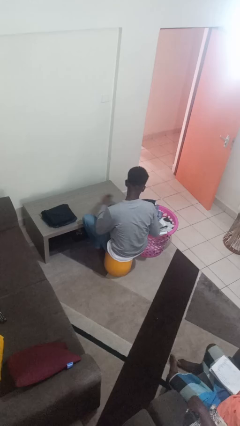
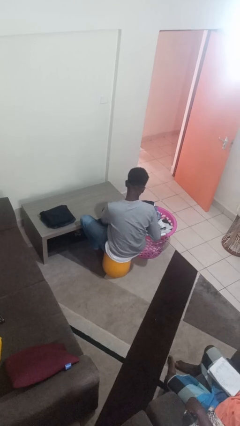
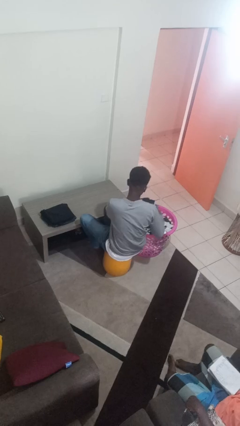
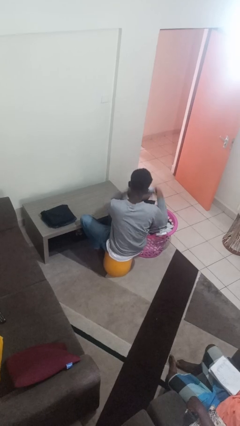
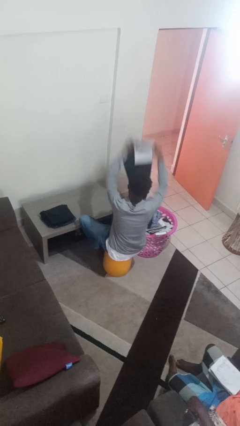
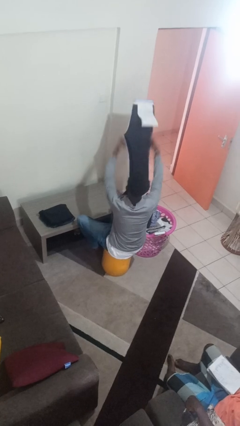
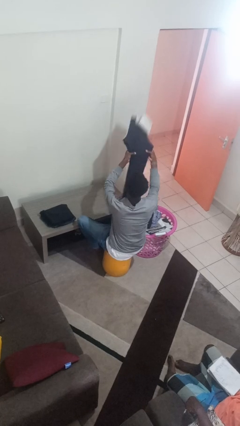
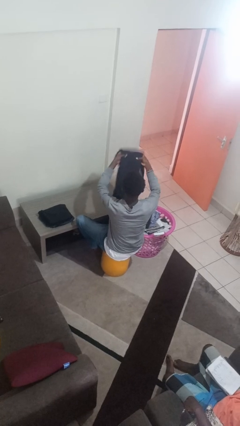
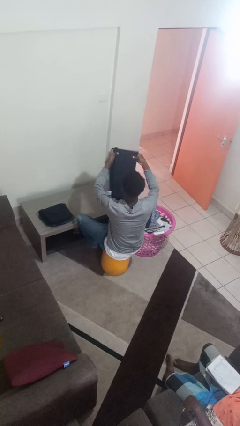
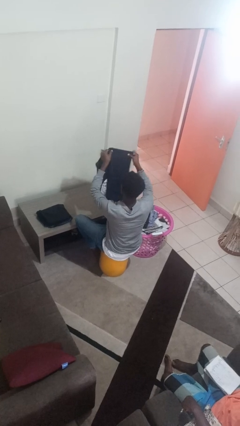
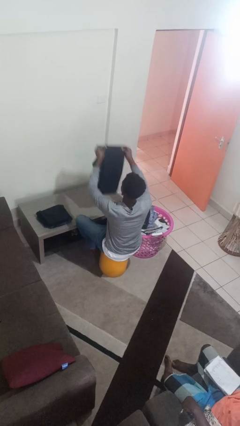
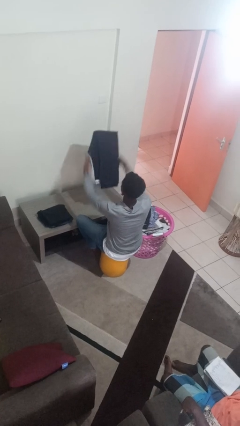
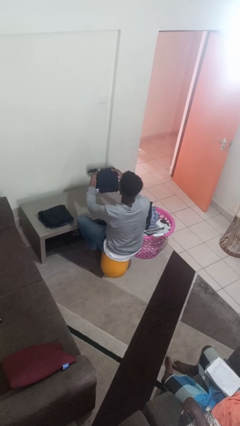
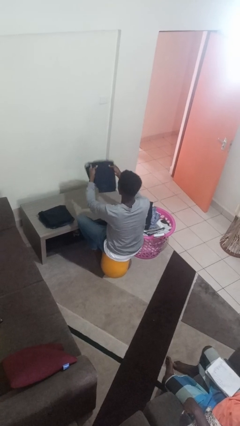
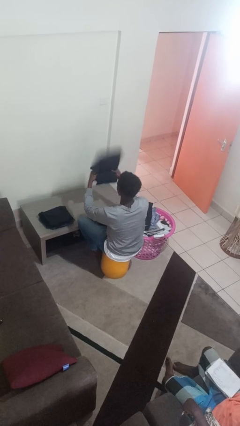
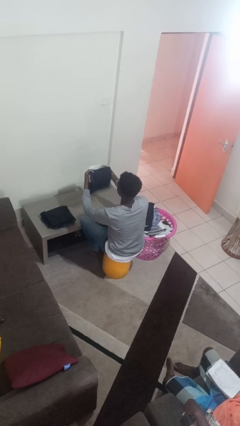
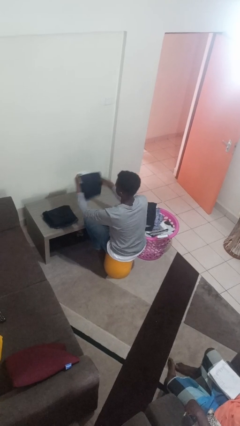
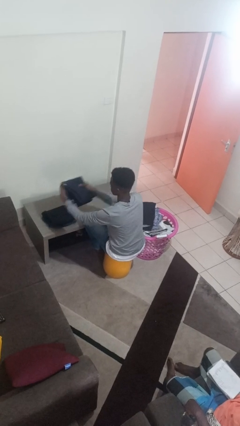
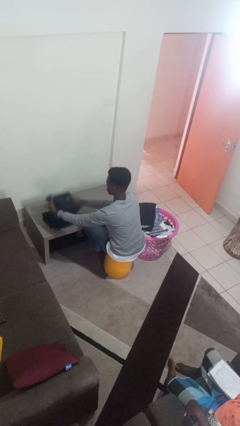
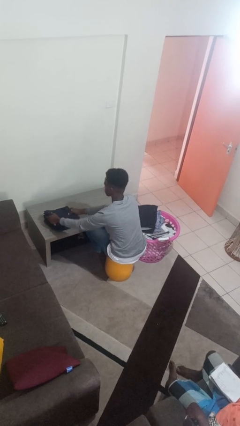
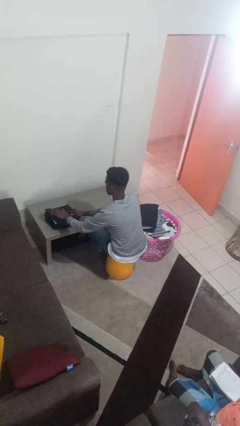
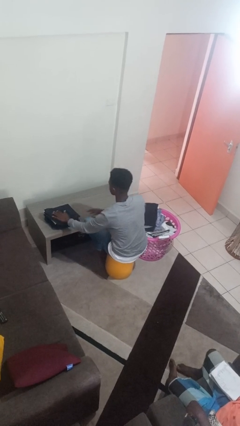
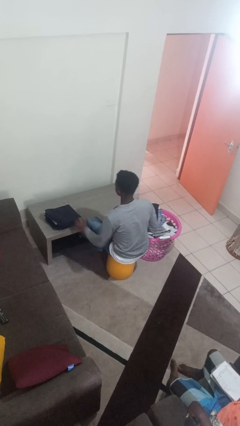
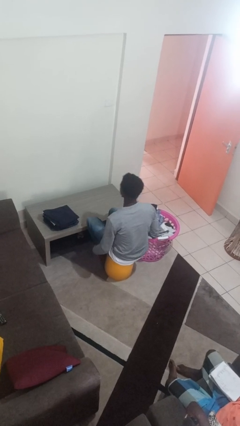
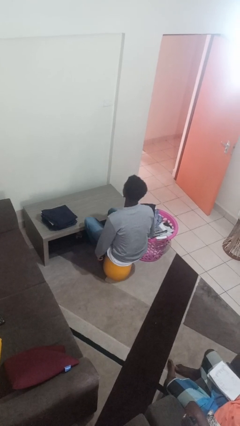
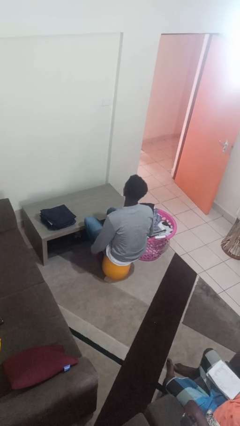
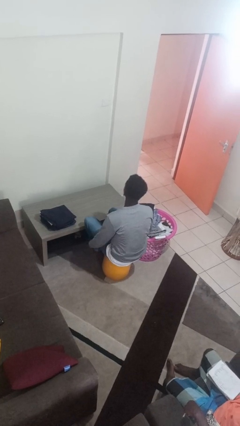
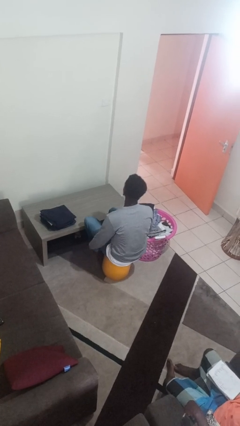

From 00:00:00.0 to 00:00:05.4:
person folds pants

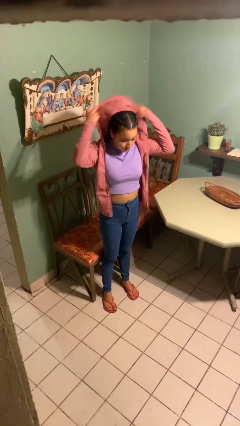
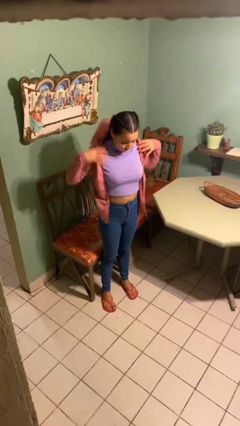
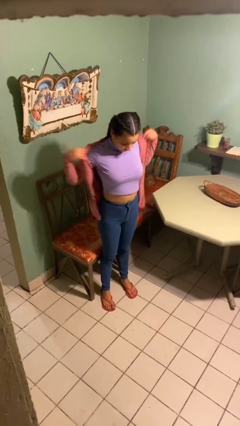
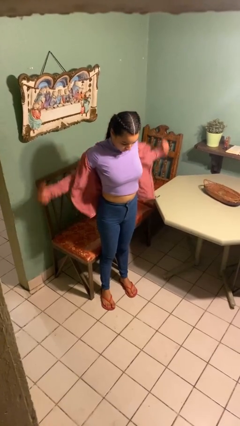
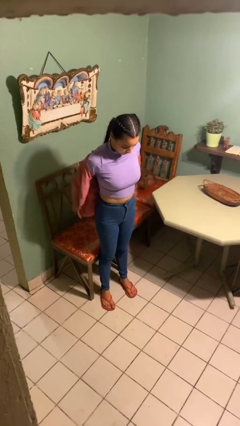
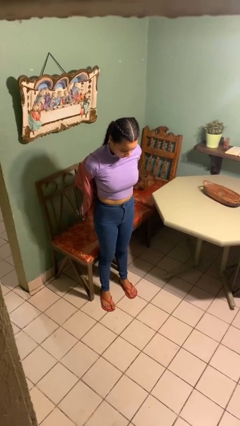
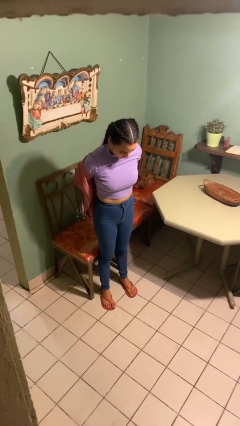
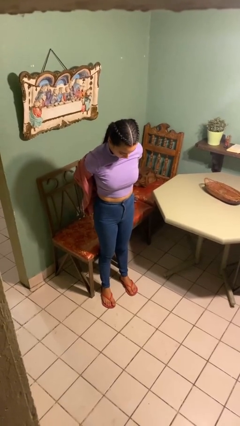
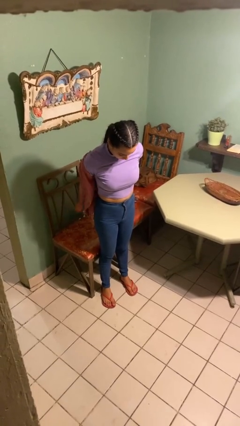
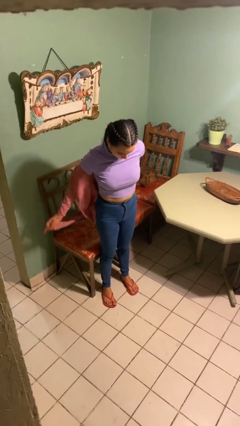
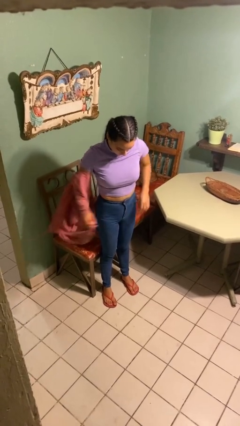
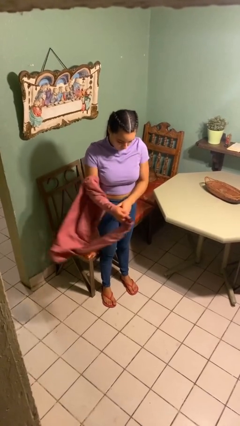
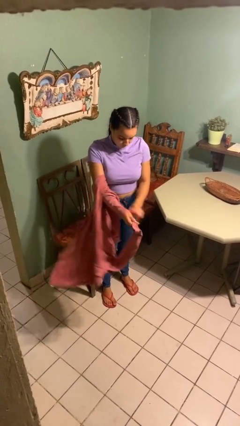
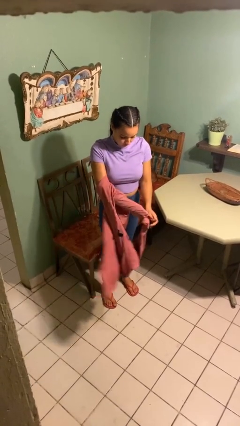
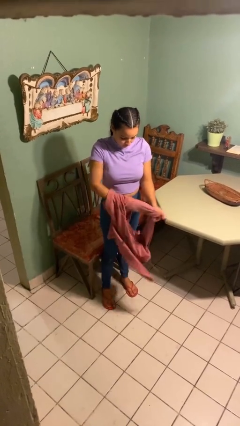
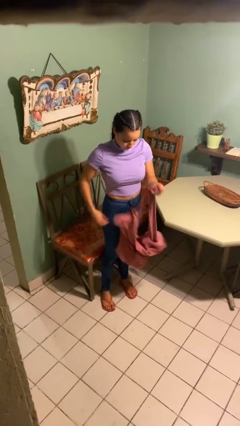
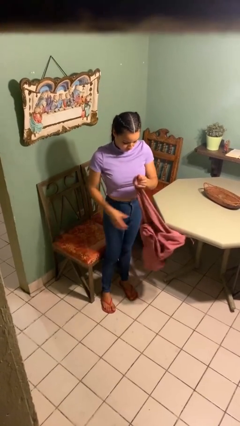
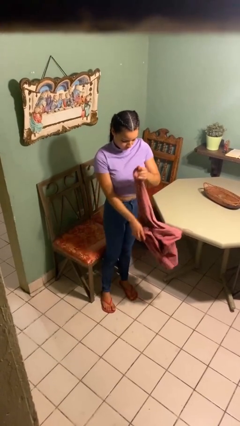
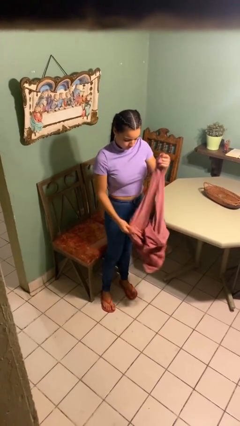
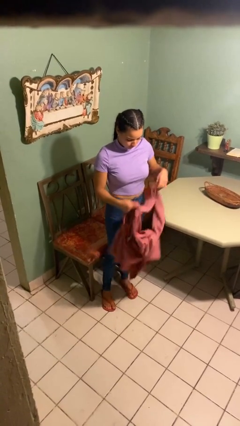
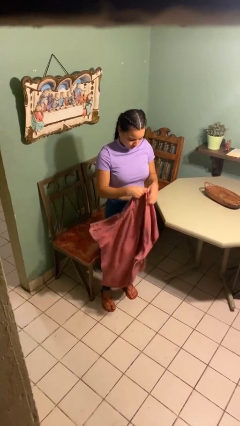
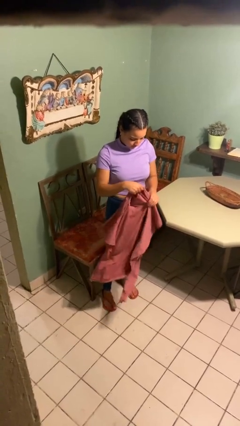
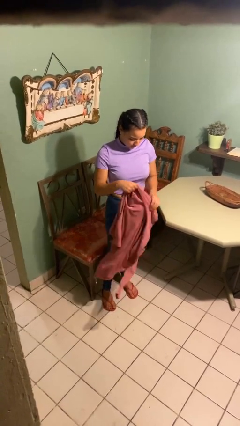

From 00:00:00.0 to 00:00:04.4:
person takes off hoodie

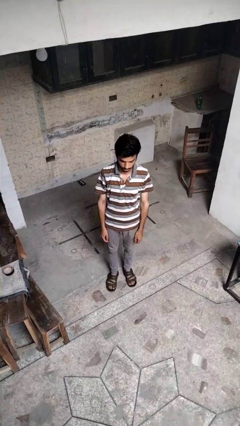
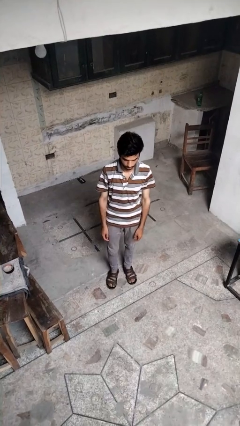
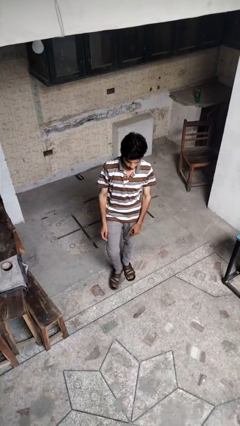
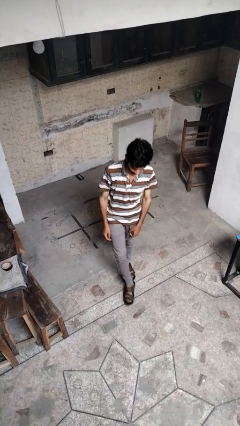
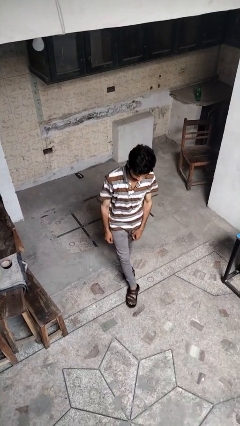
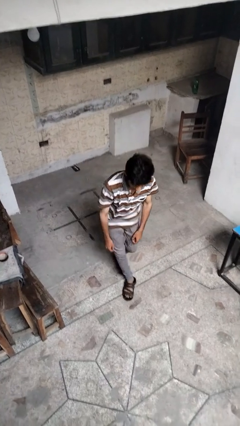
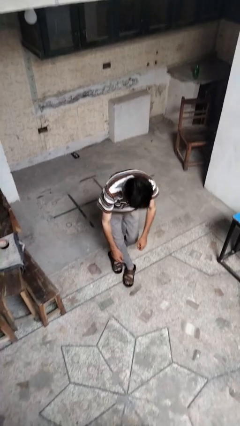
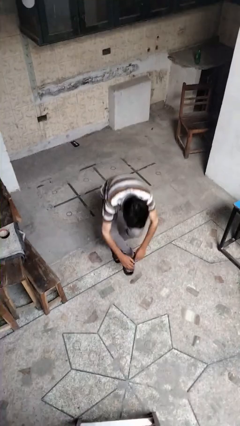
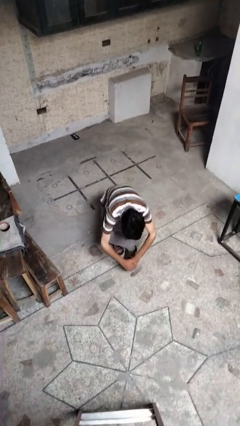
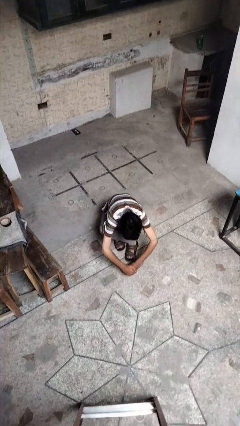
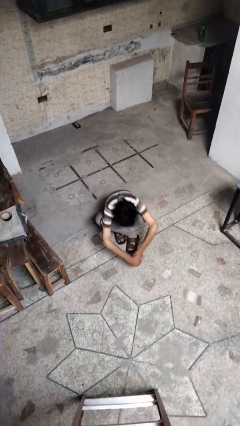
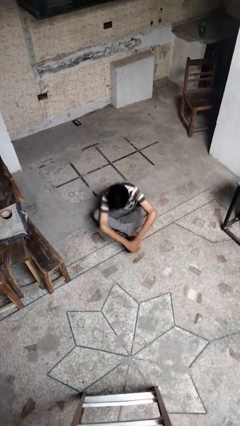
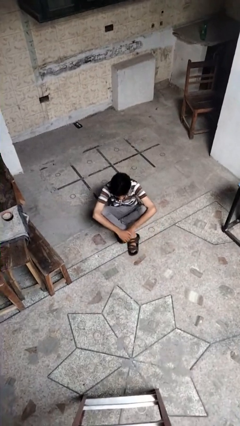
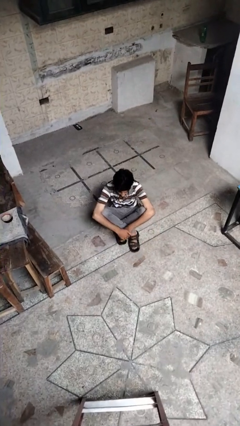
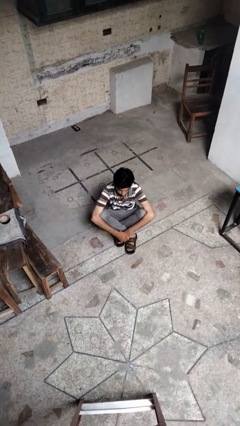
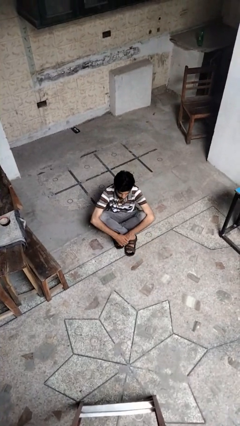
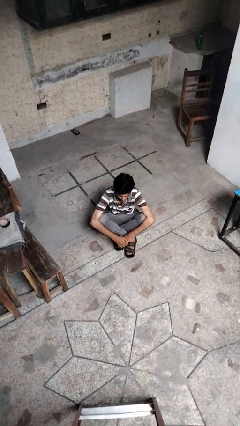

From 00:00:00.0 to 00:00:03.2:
person sits crisscross

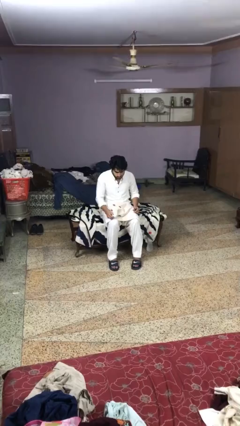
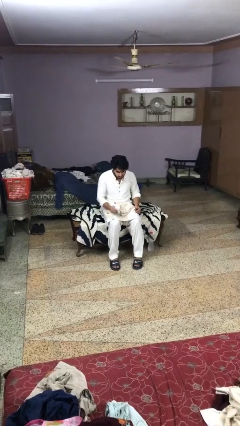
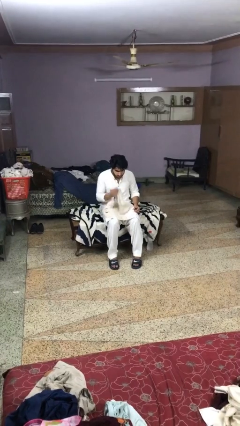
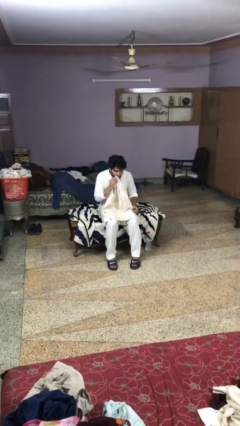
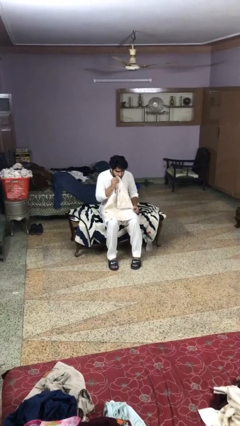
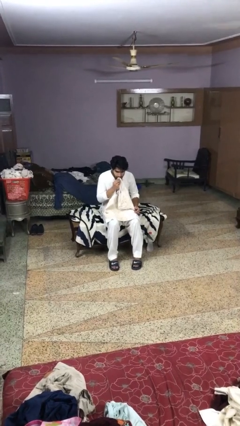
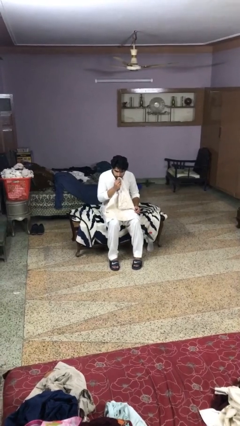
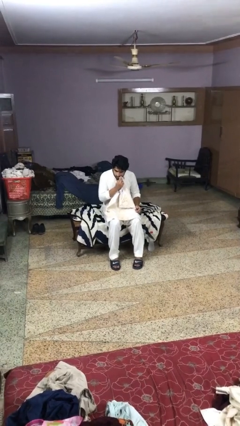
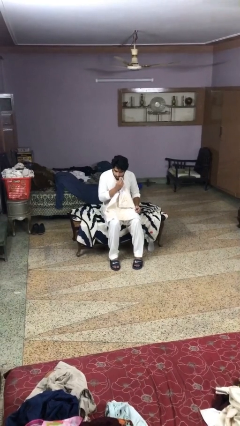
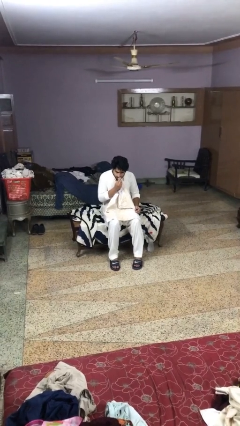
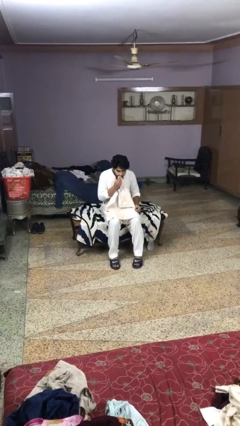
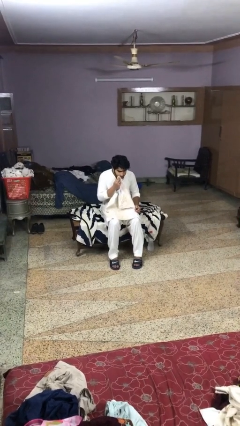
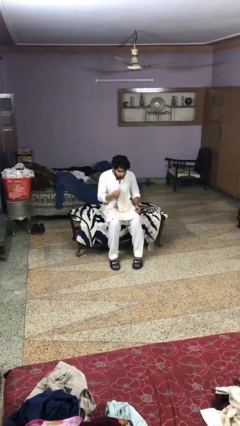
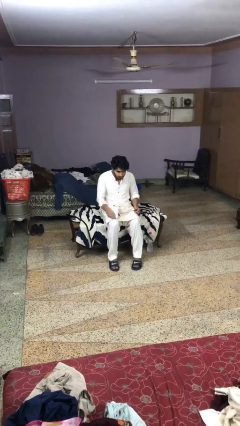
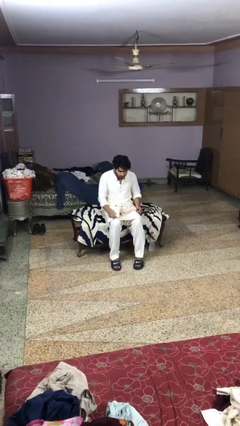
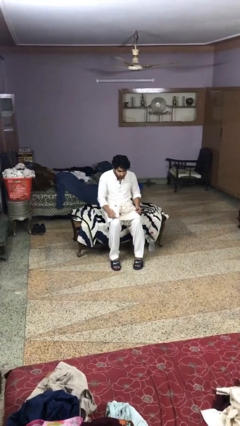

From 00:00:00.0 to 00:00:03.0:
person wipes mouth with napkin

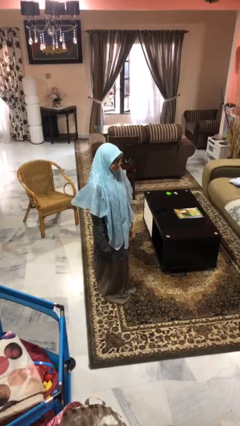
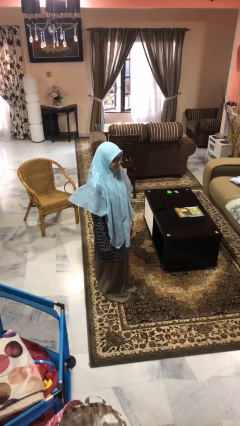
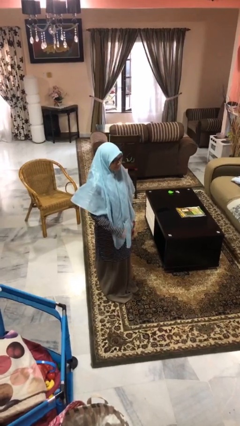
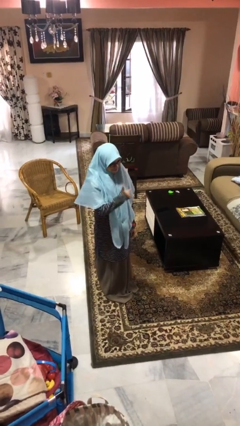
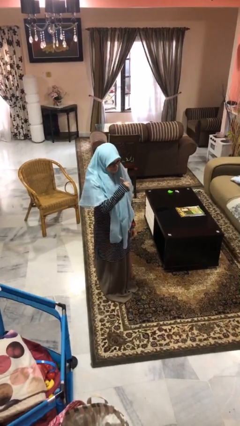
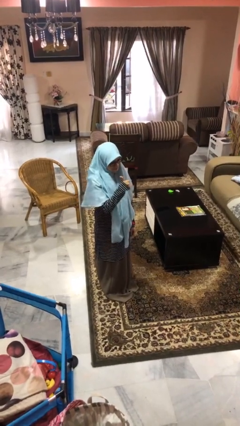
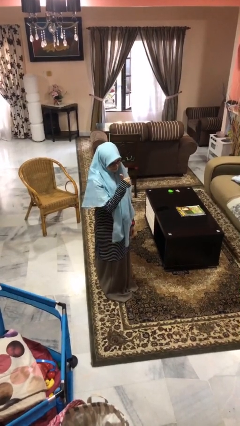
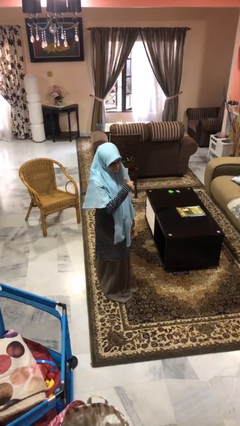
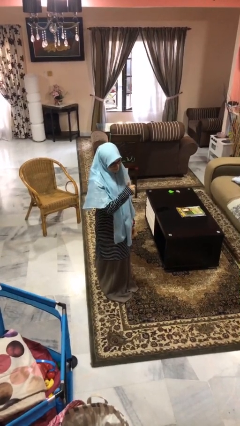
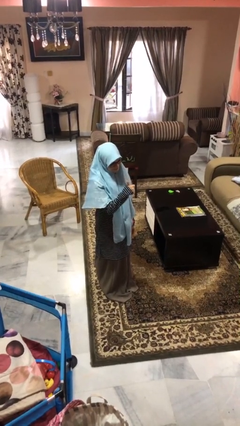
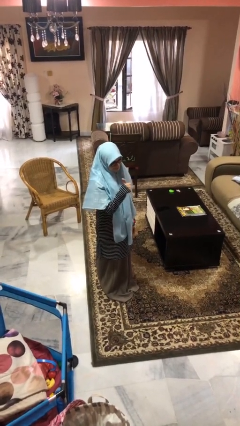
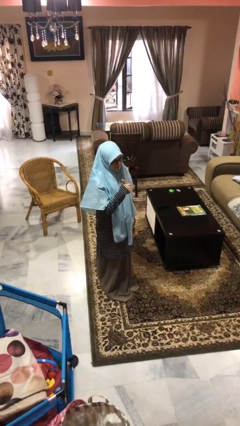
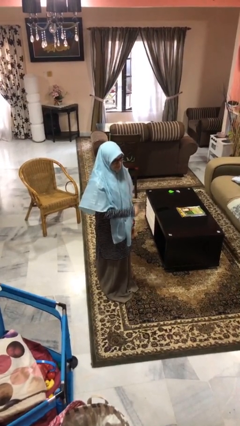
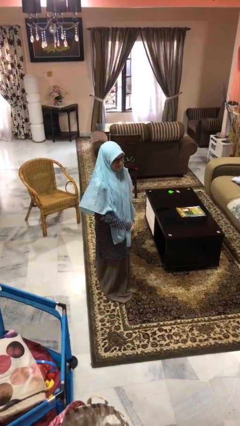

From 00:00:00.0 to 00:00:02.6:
person gestures thumbs up
